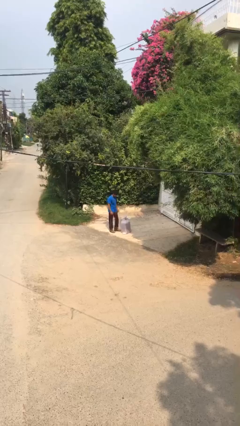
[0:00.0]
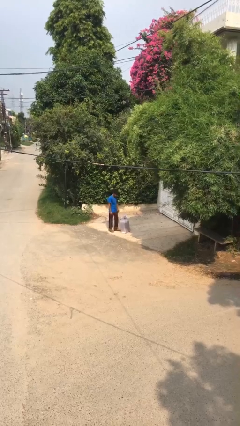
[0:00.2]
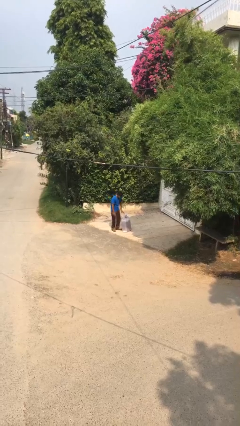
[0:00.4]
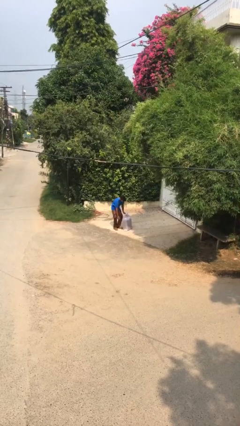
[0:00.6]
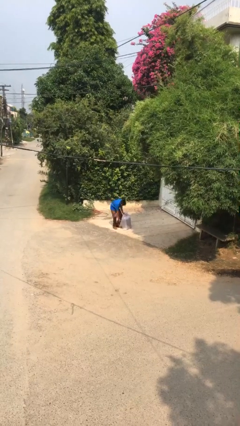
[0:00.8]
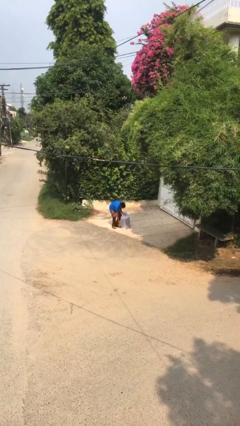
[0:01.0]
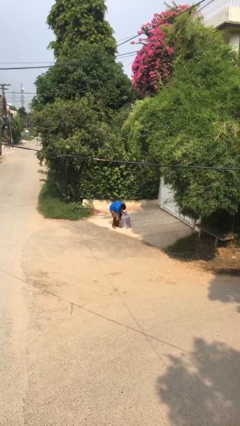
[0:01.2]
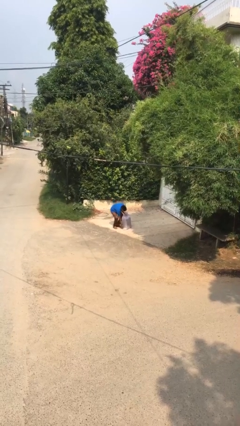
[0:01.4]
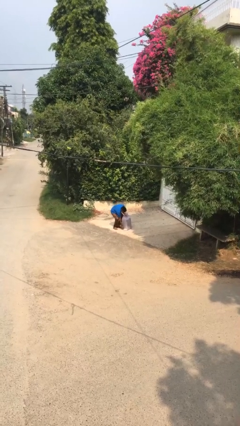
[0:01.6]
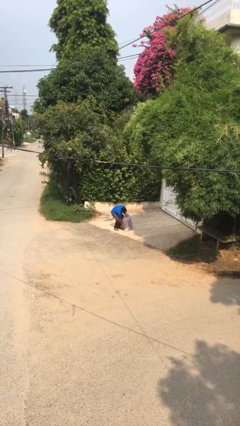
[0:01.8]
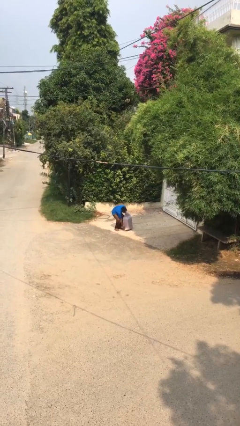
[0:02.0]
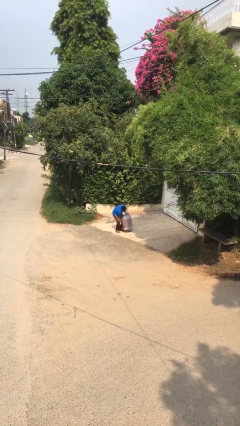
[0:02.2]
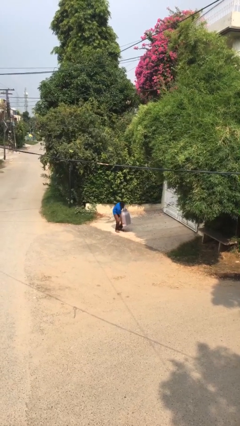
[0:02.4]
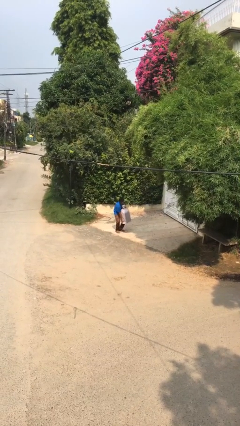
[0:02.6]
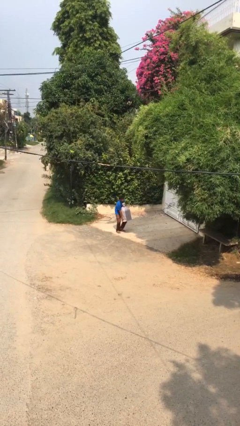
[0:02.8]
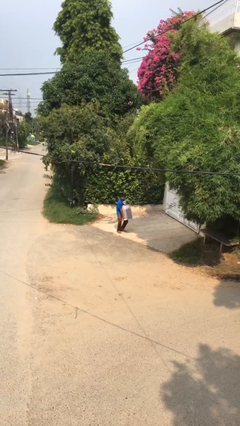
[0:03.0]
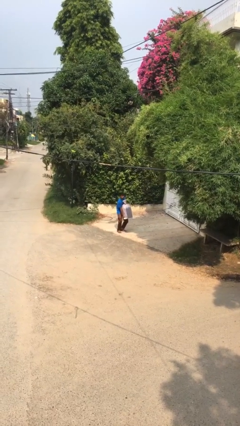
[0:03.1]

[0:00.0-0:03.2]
person picks up object from floor

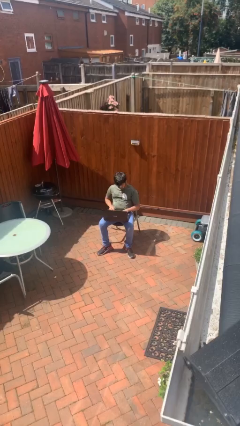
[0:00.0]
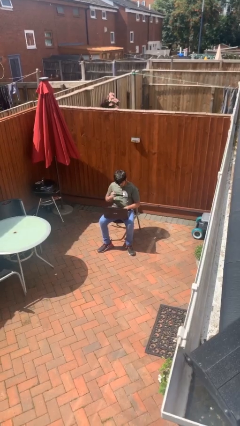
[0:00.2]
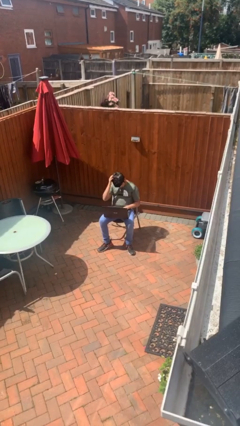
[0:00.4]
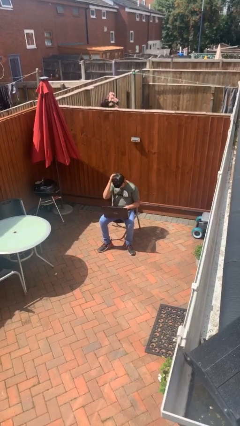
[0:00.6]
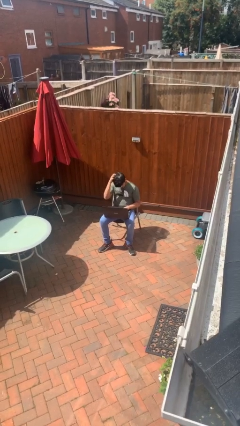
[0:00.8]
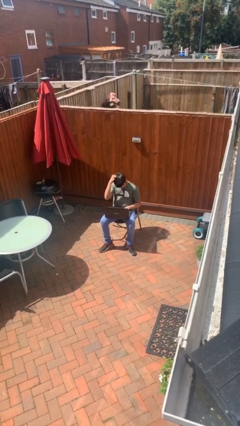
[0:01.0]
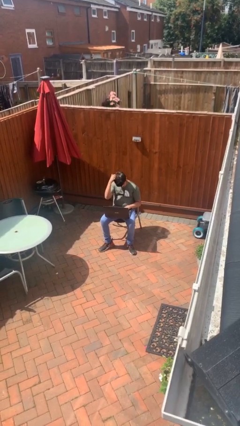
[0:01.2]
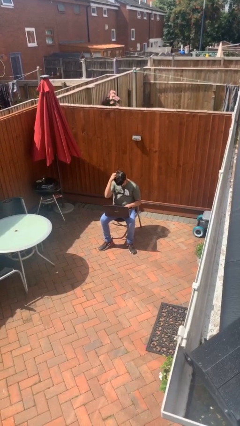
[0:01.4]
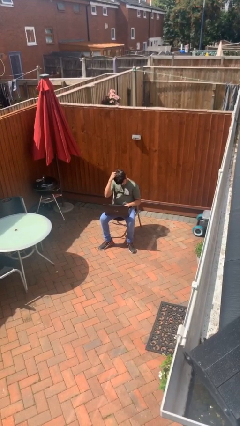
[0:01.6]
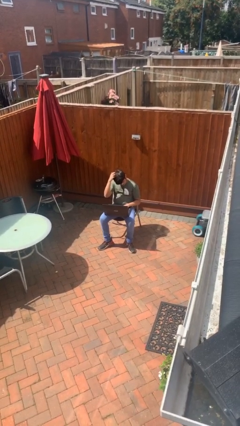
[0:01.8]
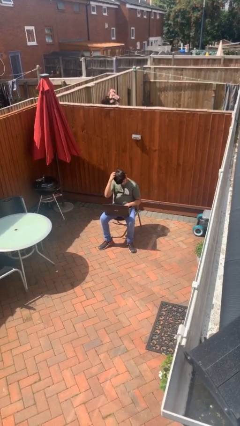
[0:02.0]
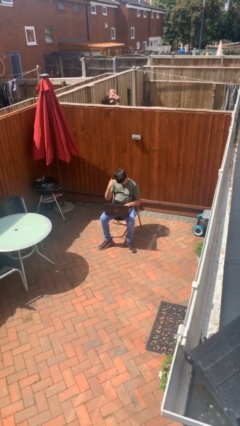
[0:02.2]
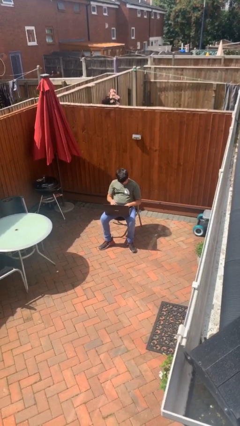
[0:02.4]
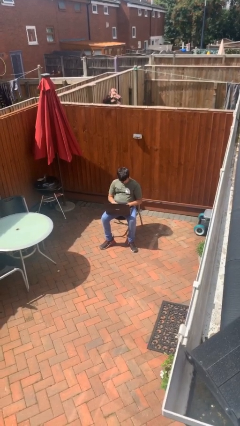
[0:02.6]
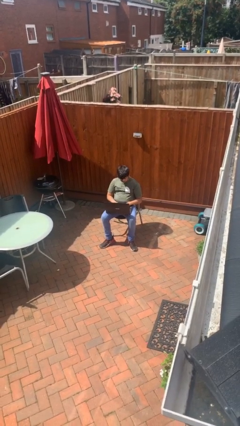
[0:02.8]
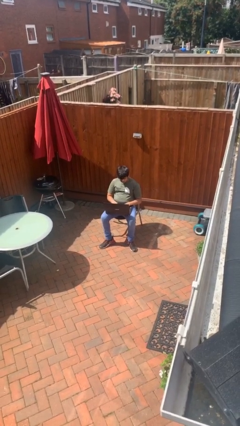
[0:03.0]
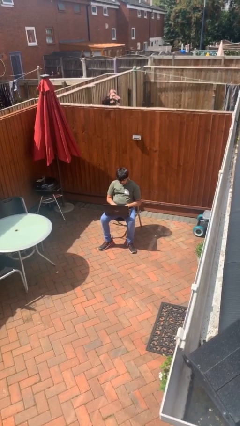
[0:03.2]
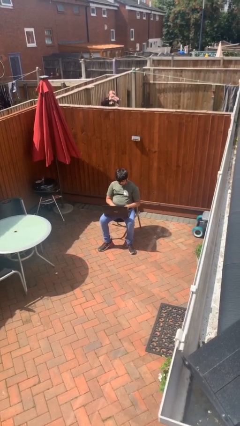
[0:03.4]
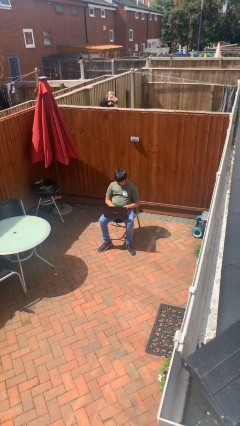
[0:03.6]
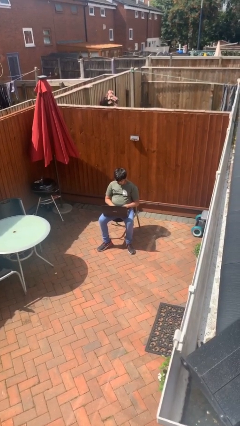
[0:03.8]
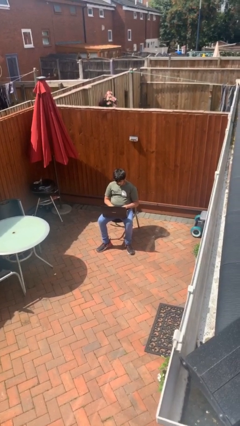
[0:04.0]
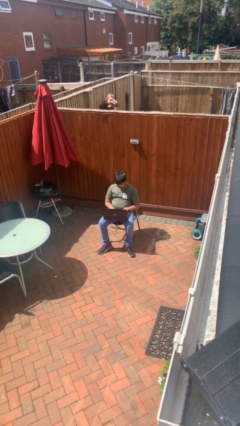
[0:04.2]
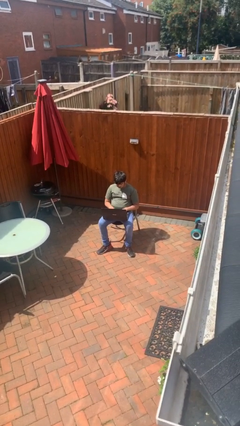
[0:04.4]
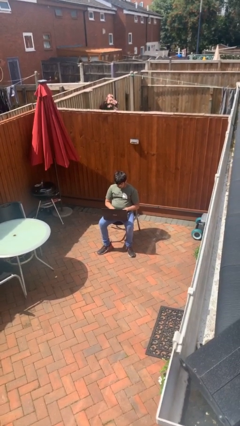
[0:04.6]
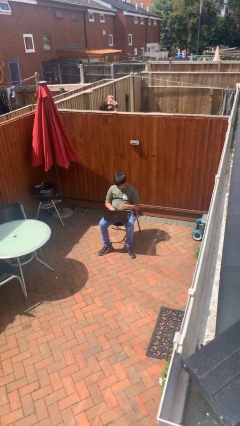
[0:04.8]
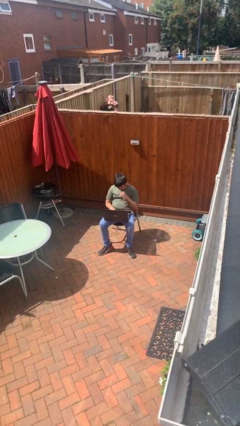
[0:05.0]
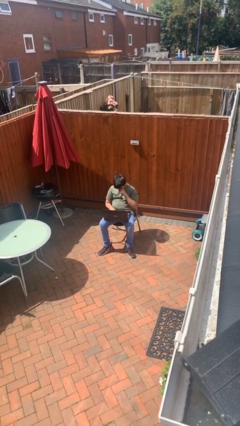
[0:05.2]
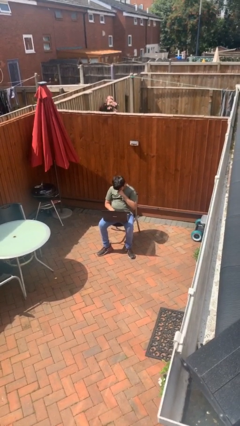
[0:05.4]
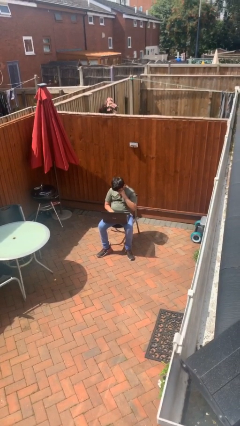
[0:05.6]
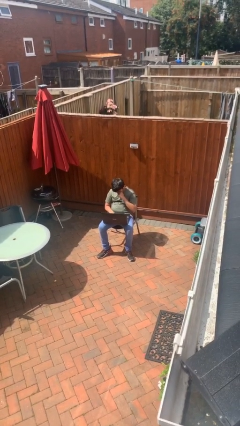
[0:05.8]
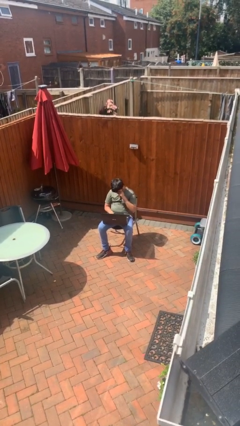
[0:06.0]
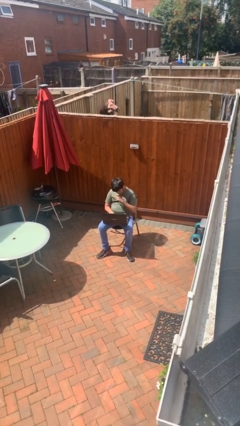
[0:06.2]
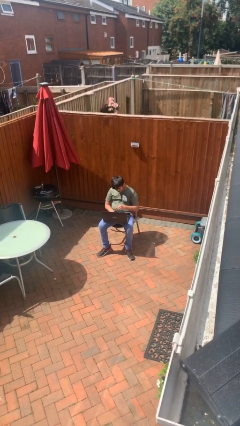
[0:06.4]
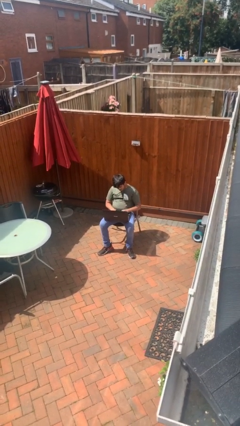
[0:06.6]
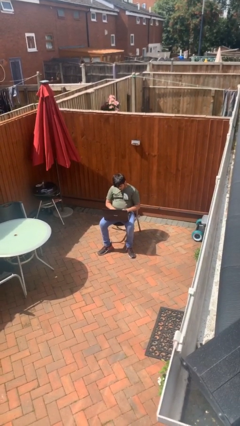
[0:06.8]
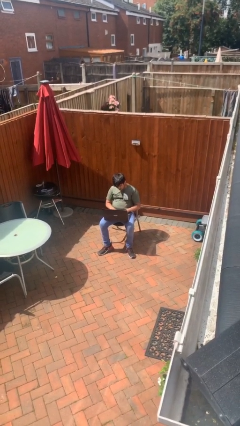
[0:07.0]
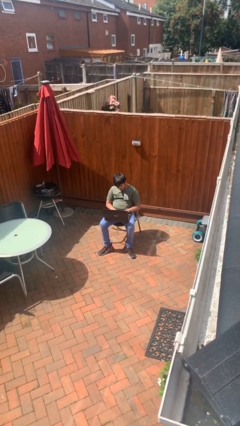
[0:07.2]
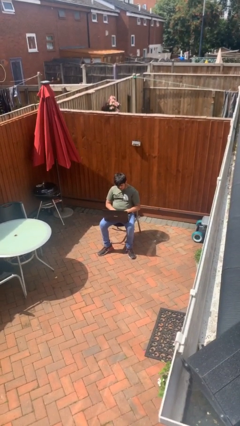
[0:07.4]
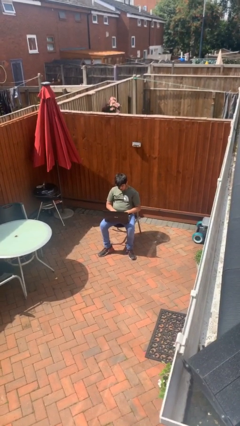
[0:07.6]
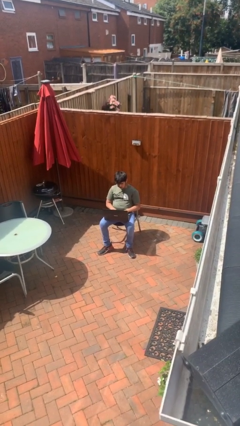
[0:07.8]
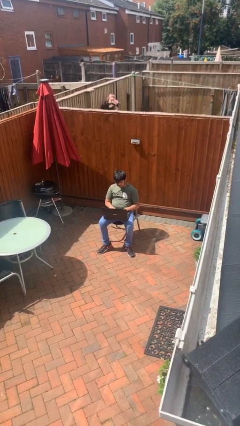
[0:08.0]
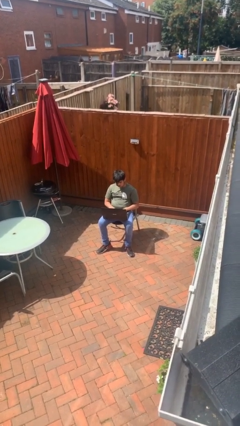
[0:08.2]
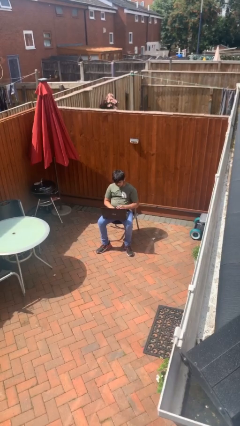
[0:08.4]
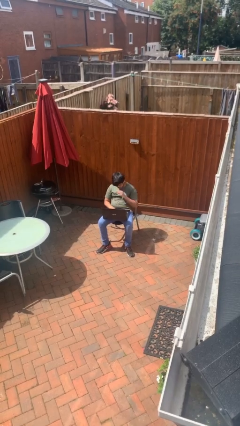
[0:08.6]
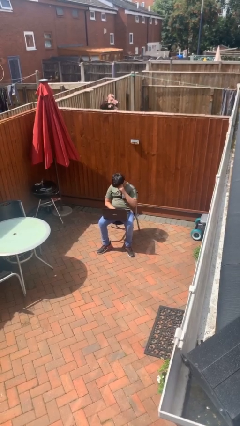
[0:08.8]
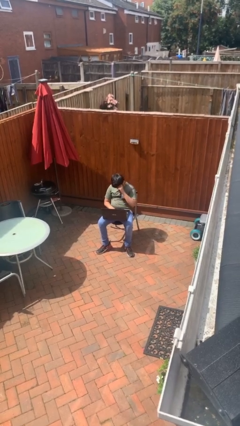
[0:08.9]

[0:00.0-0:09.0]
person interacts with laptop

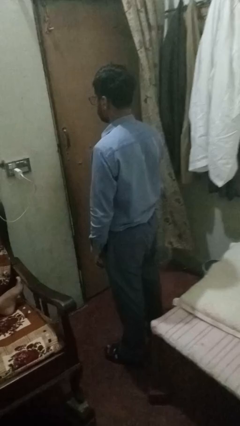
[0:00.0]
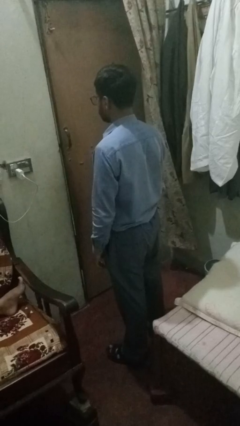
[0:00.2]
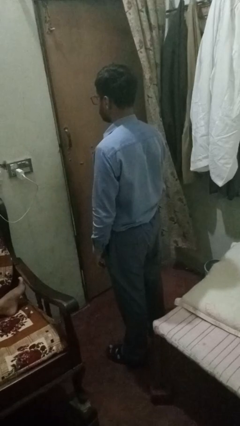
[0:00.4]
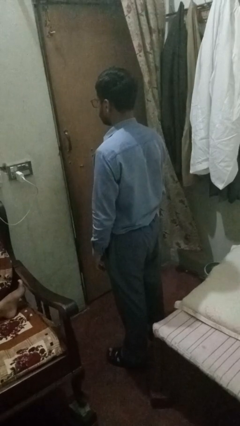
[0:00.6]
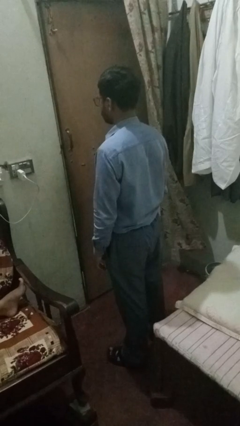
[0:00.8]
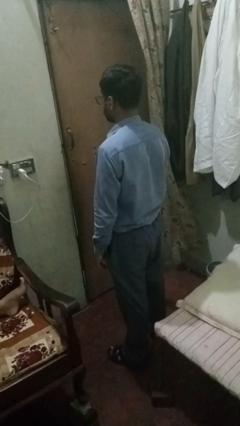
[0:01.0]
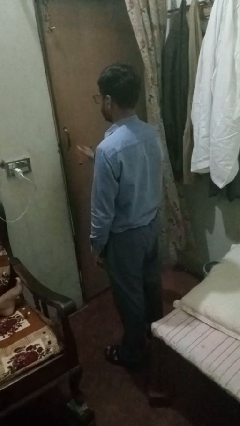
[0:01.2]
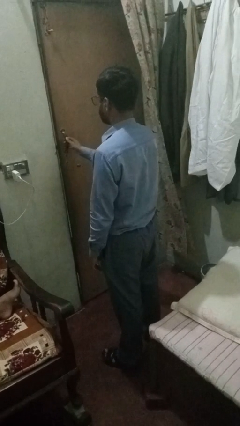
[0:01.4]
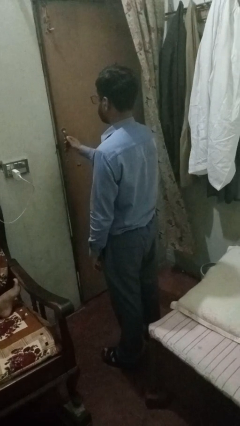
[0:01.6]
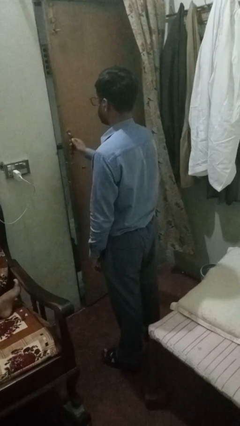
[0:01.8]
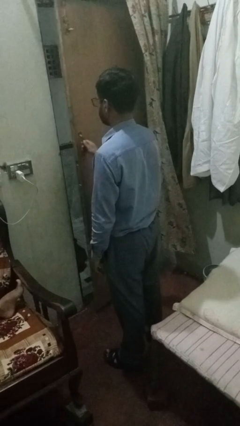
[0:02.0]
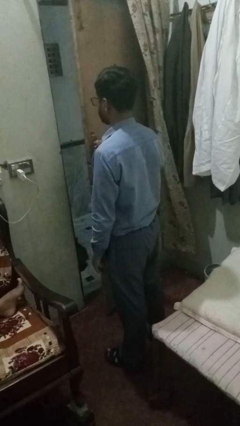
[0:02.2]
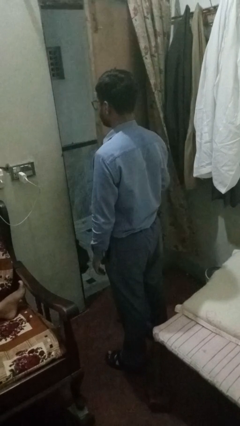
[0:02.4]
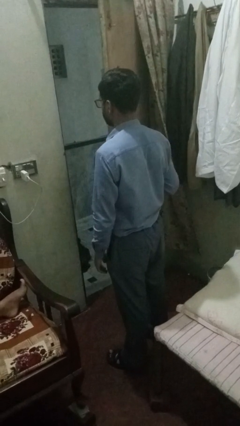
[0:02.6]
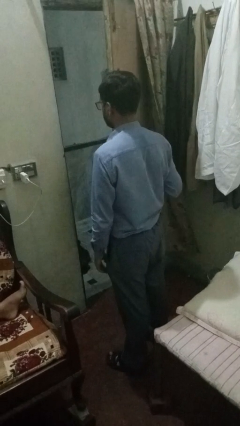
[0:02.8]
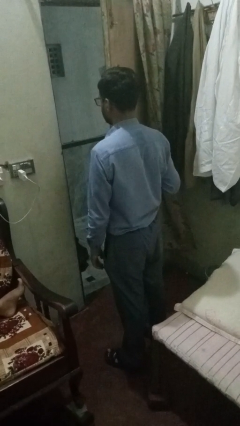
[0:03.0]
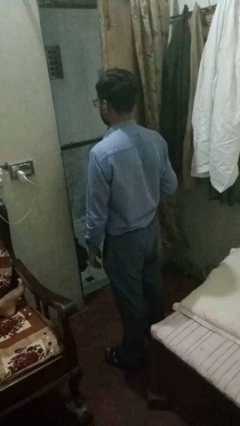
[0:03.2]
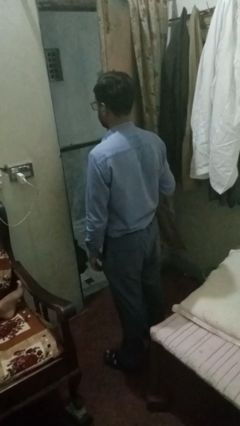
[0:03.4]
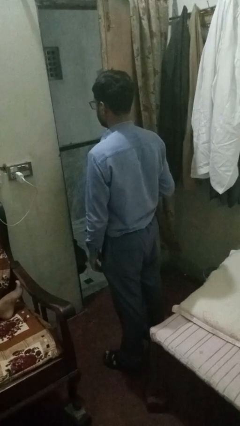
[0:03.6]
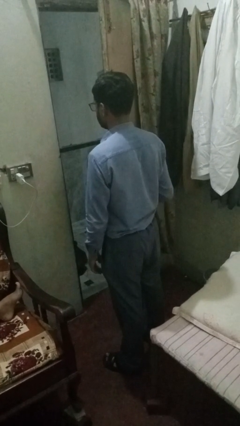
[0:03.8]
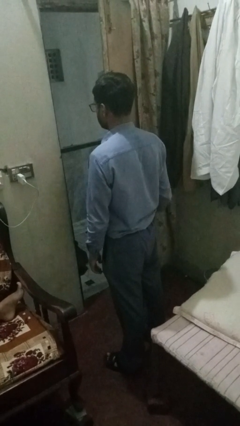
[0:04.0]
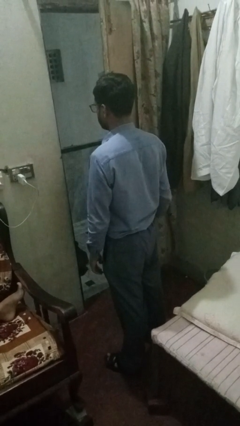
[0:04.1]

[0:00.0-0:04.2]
person opens sliding door

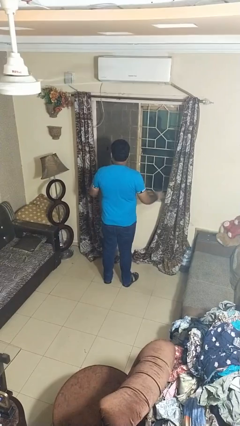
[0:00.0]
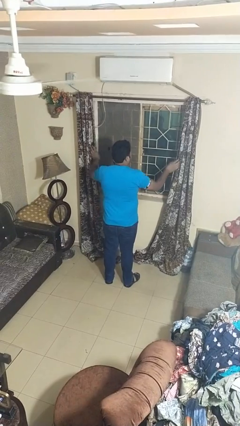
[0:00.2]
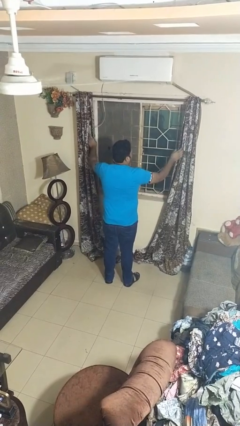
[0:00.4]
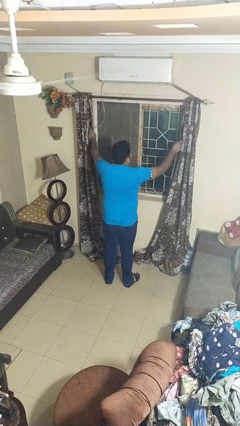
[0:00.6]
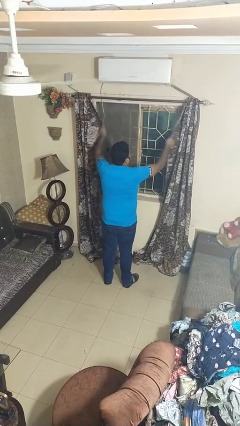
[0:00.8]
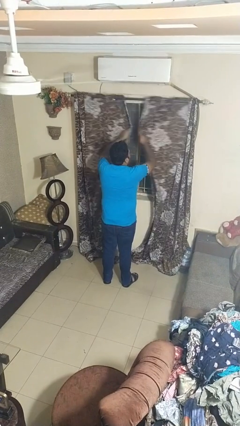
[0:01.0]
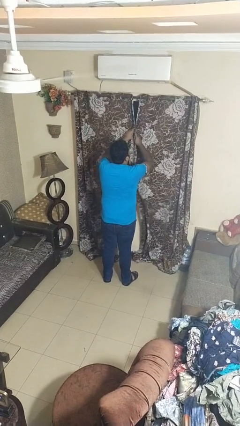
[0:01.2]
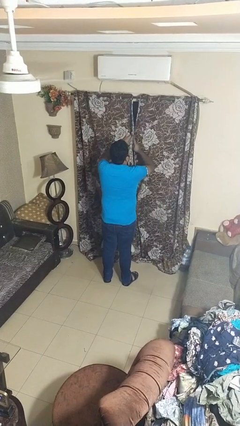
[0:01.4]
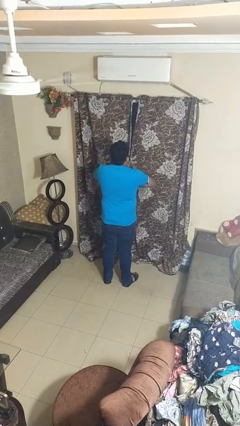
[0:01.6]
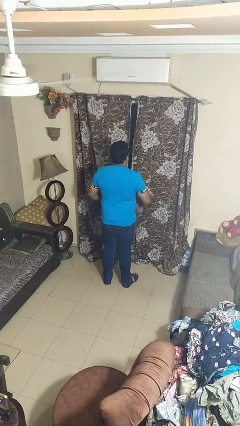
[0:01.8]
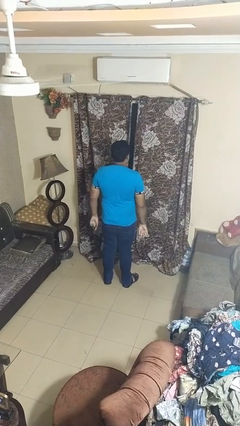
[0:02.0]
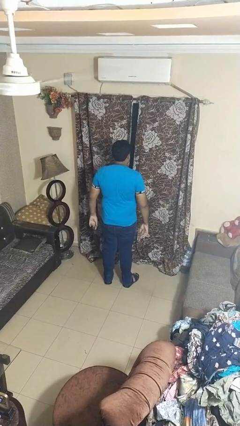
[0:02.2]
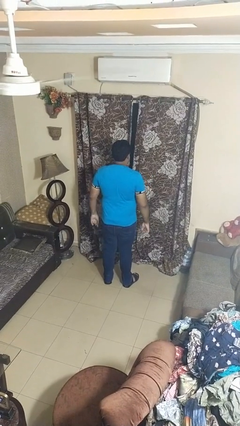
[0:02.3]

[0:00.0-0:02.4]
person closes curtains
